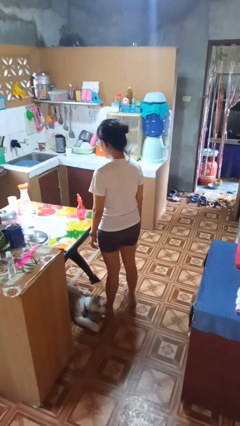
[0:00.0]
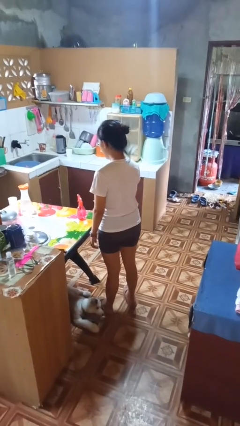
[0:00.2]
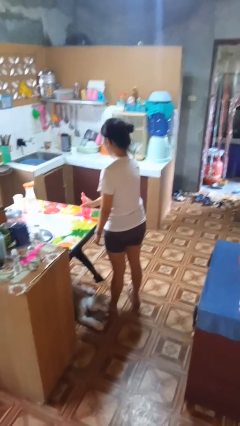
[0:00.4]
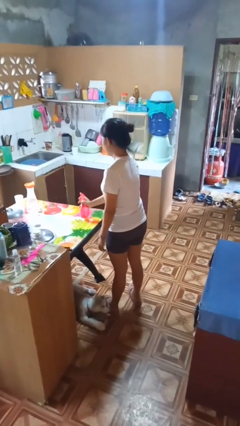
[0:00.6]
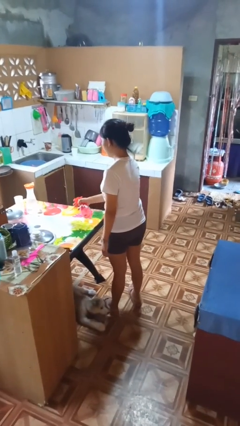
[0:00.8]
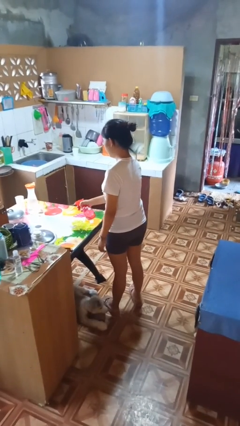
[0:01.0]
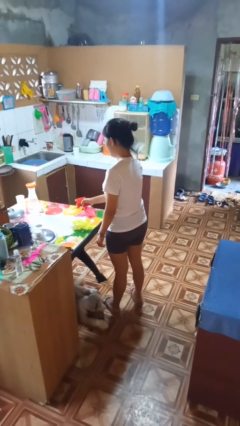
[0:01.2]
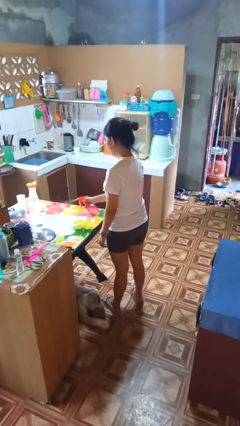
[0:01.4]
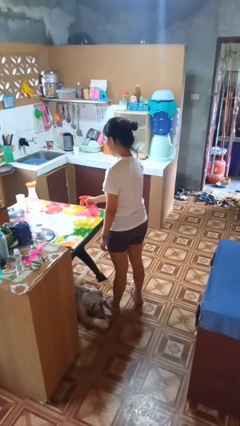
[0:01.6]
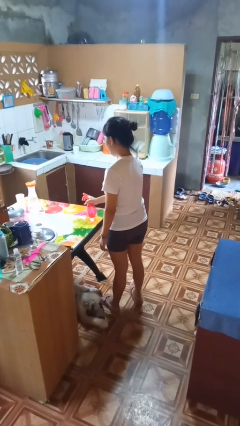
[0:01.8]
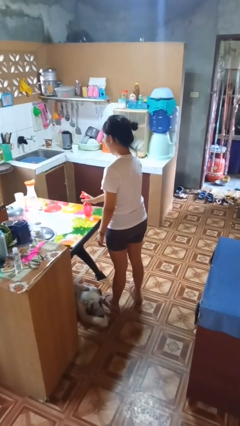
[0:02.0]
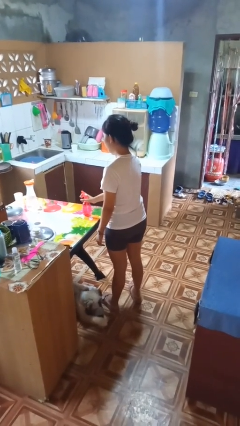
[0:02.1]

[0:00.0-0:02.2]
person sprays from bottle

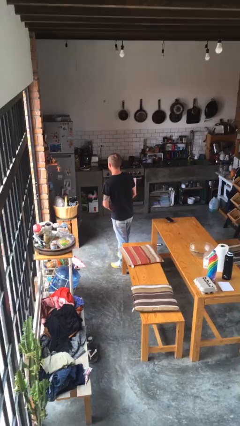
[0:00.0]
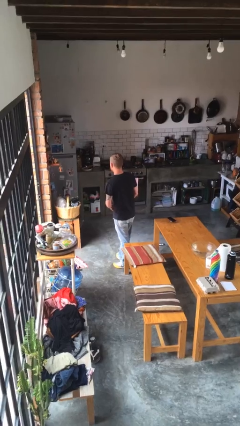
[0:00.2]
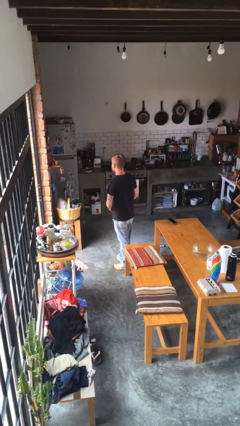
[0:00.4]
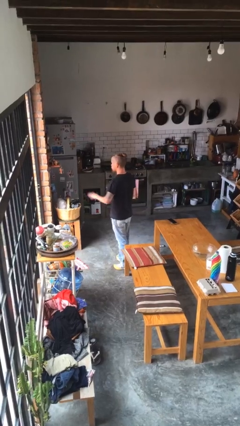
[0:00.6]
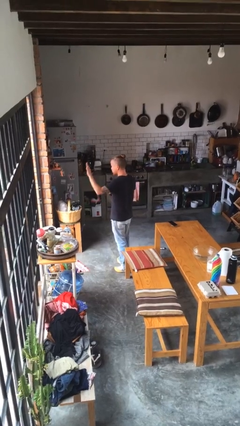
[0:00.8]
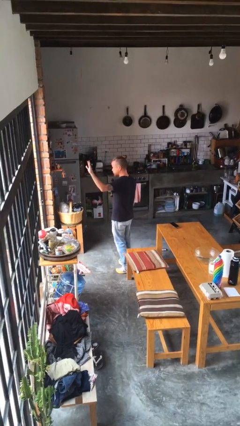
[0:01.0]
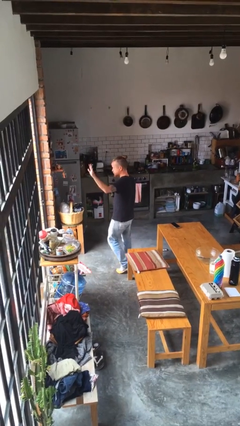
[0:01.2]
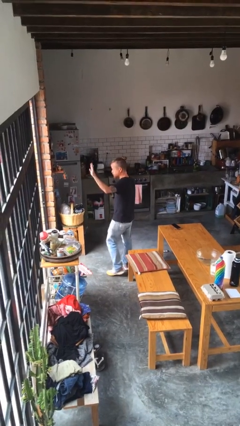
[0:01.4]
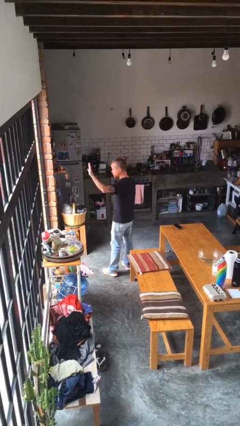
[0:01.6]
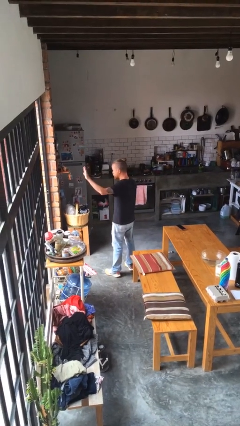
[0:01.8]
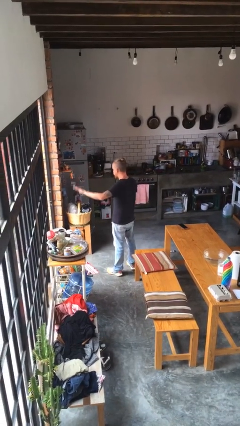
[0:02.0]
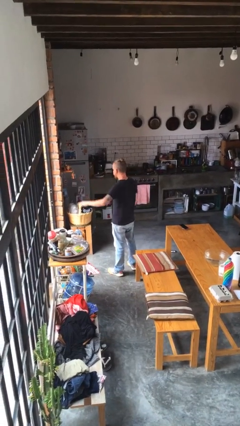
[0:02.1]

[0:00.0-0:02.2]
person gestures number five

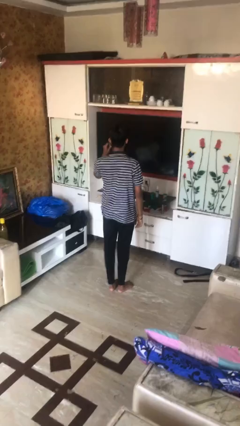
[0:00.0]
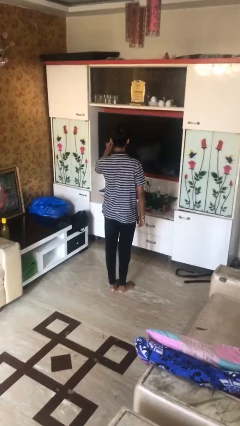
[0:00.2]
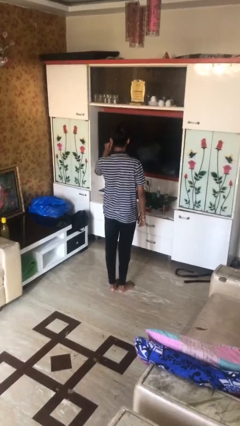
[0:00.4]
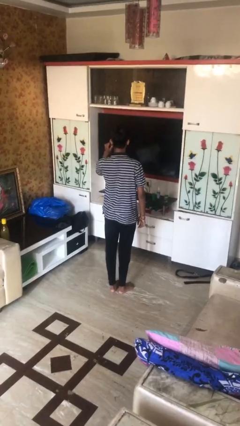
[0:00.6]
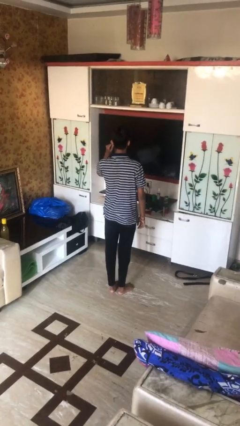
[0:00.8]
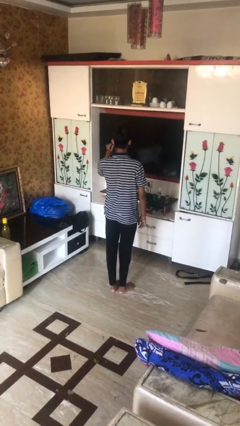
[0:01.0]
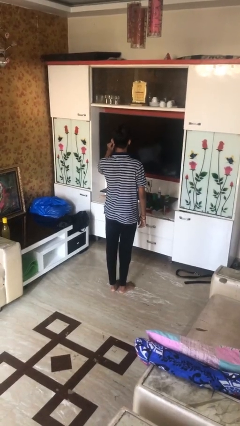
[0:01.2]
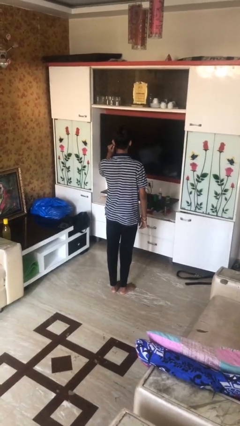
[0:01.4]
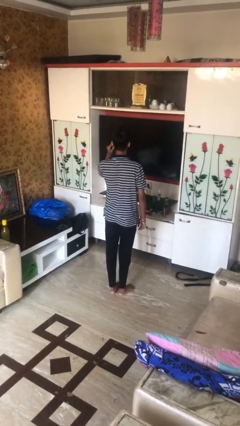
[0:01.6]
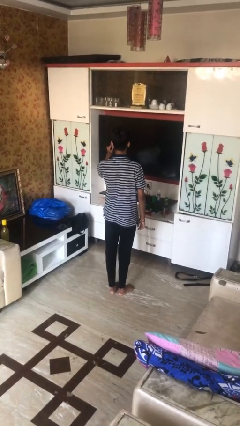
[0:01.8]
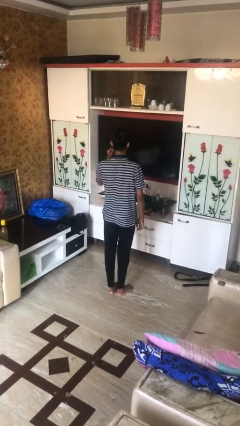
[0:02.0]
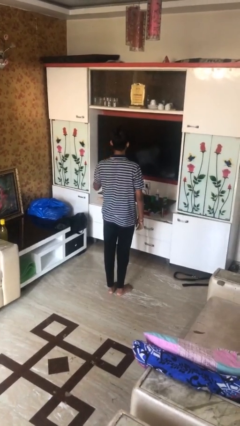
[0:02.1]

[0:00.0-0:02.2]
person touches earlobe

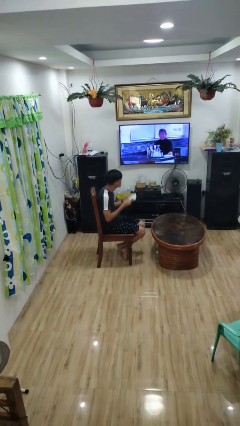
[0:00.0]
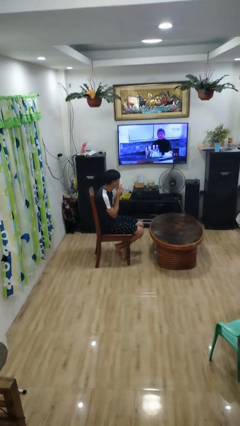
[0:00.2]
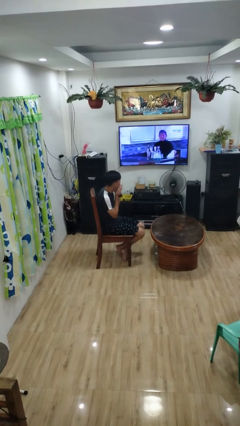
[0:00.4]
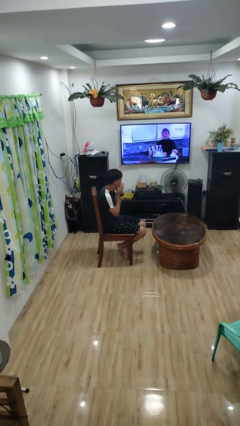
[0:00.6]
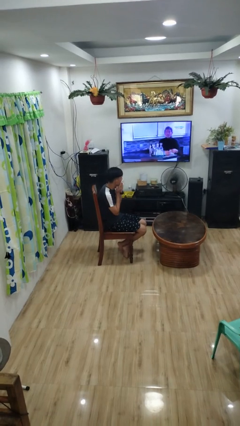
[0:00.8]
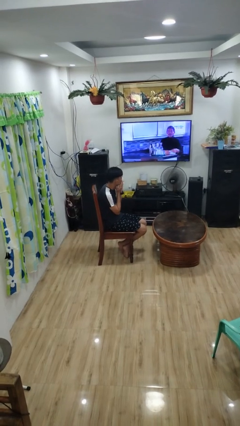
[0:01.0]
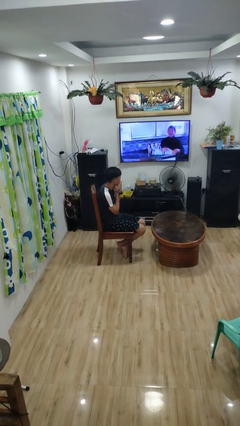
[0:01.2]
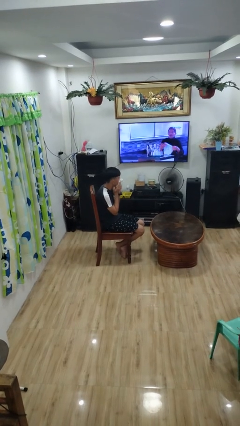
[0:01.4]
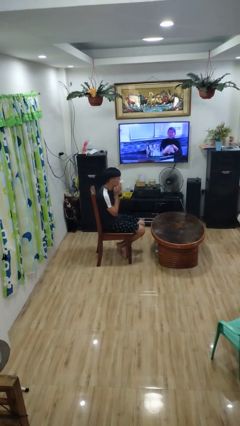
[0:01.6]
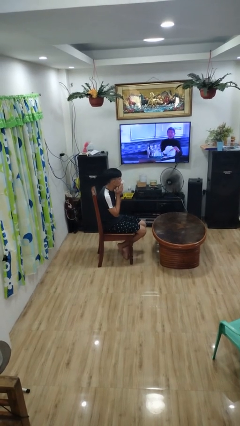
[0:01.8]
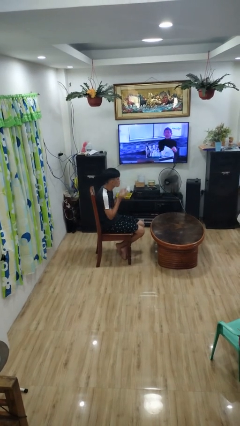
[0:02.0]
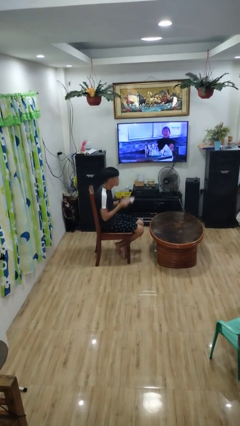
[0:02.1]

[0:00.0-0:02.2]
person wipes mouth with napkin

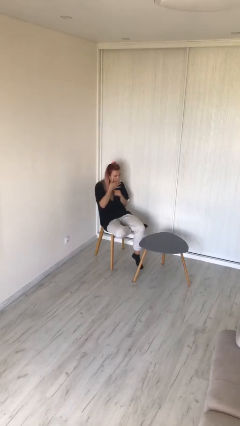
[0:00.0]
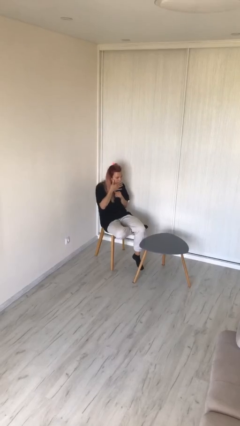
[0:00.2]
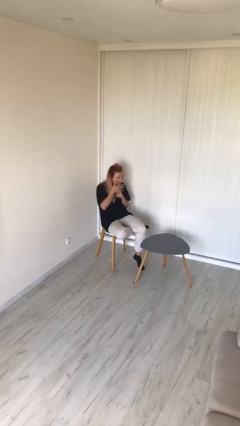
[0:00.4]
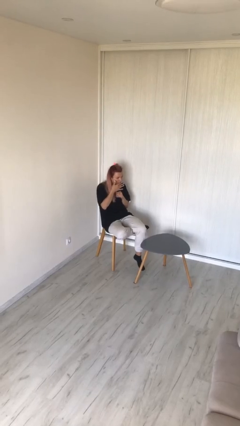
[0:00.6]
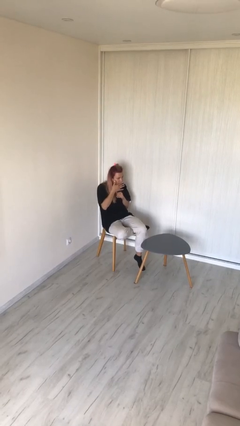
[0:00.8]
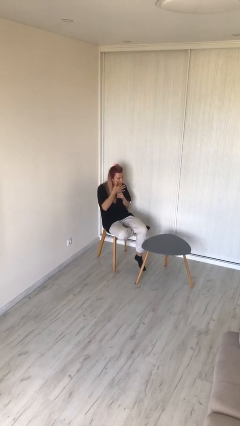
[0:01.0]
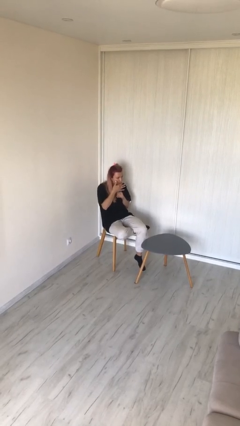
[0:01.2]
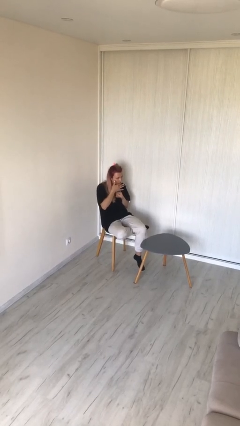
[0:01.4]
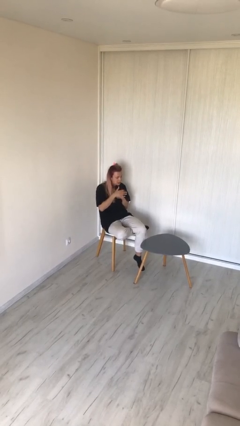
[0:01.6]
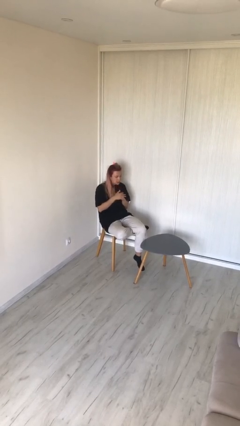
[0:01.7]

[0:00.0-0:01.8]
person licks fingers

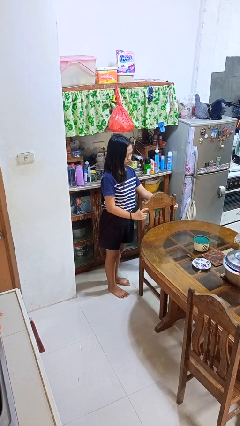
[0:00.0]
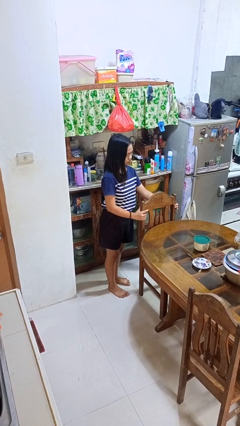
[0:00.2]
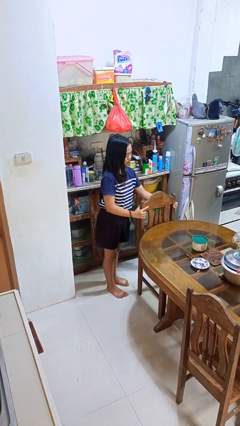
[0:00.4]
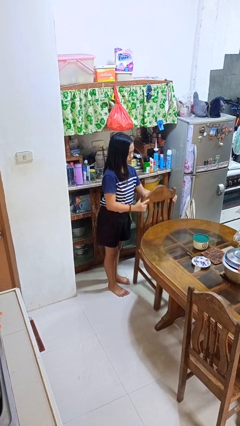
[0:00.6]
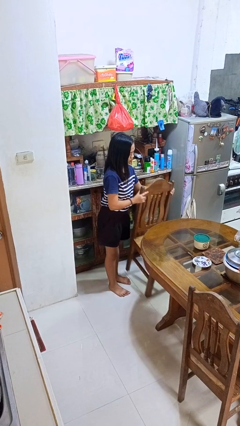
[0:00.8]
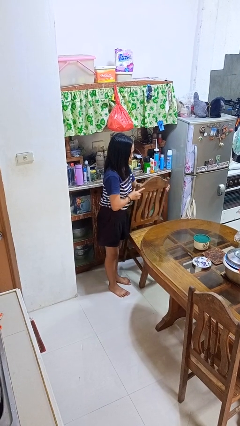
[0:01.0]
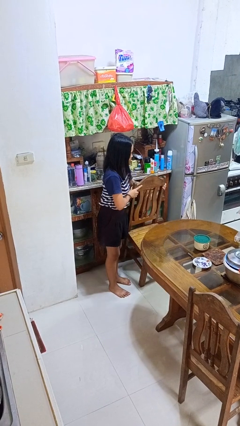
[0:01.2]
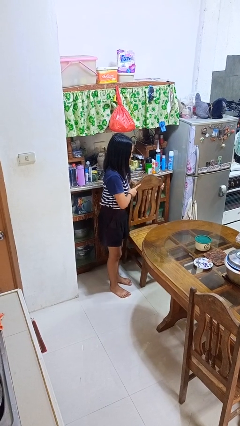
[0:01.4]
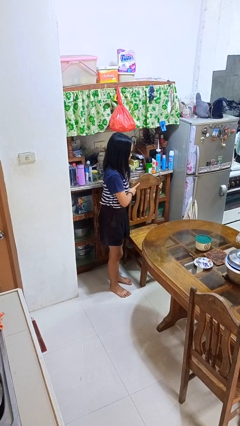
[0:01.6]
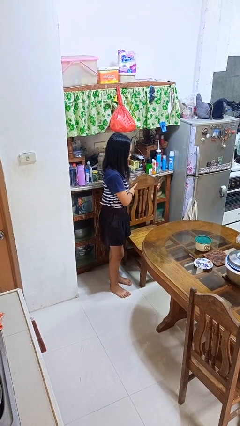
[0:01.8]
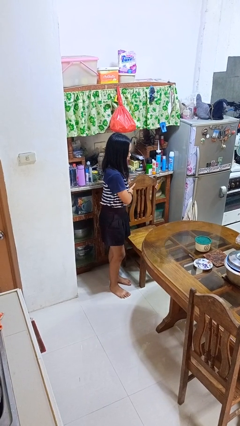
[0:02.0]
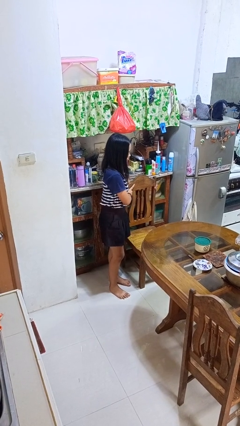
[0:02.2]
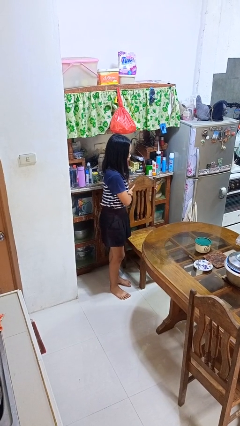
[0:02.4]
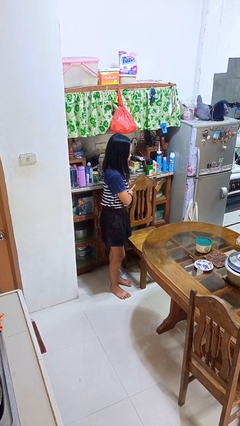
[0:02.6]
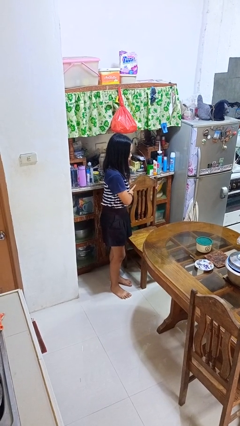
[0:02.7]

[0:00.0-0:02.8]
person pulls out chair

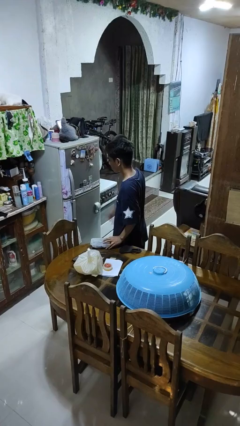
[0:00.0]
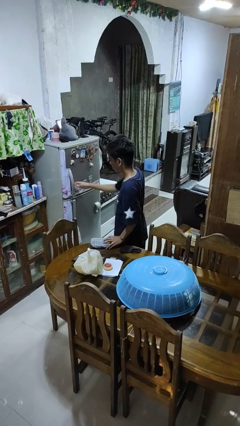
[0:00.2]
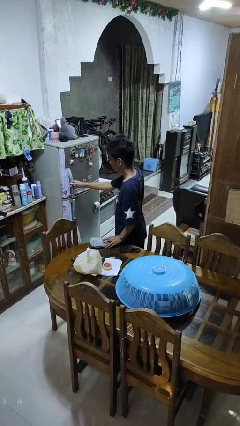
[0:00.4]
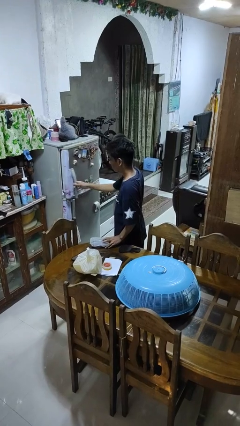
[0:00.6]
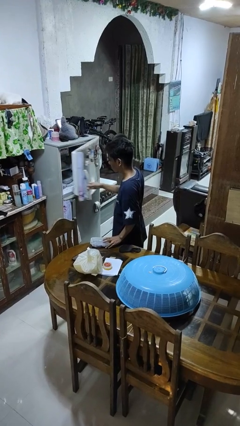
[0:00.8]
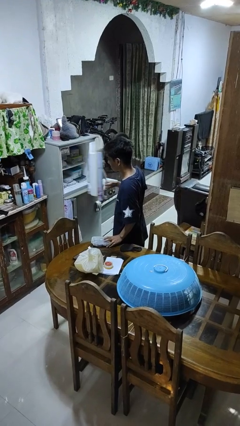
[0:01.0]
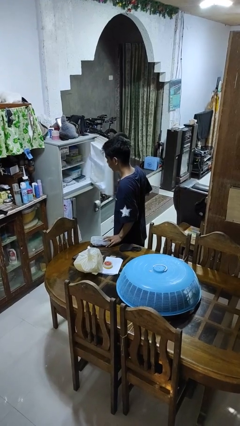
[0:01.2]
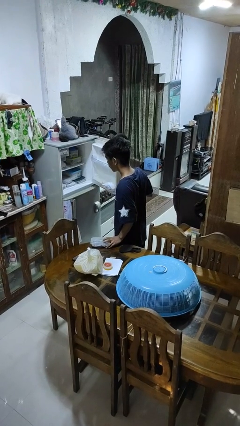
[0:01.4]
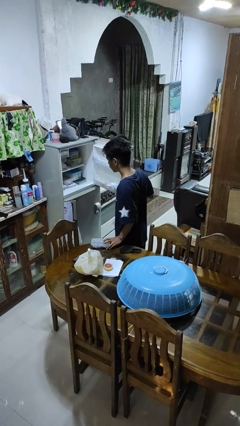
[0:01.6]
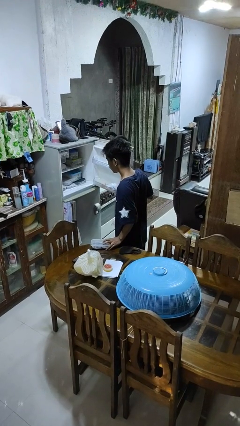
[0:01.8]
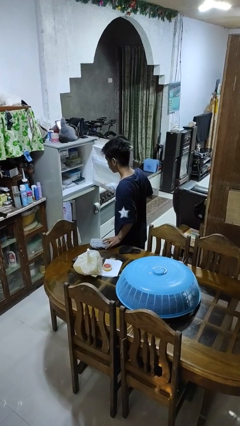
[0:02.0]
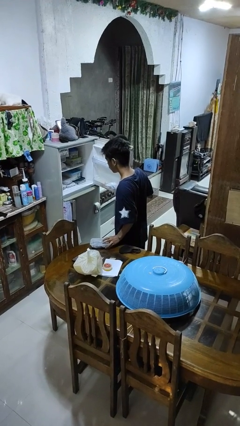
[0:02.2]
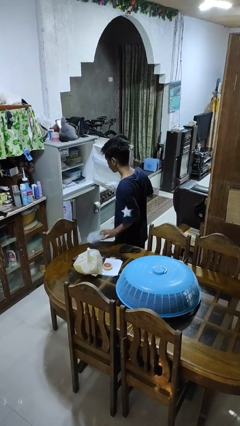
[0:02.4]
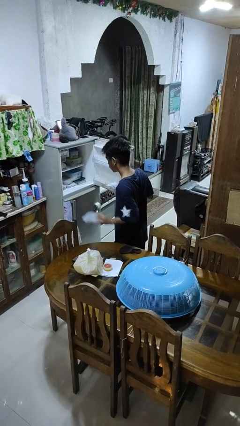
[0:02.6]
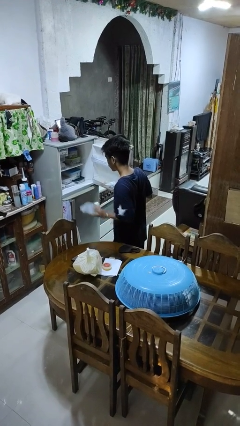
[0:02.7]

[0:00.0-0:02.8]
person opens refrigerator

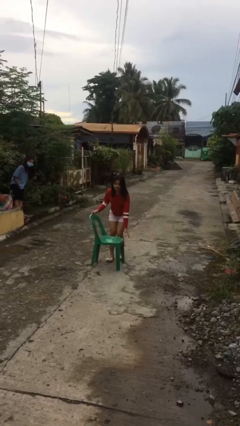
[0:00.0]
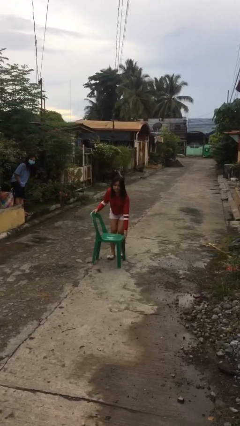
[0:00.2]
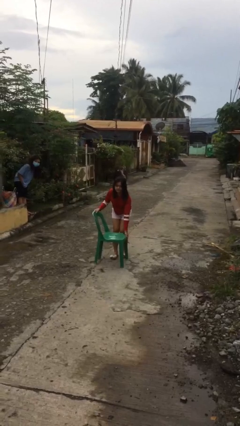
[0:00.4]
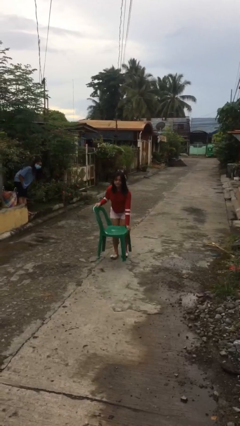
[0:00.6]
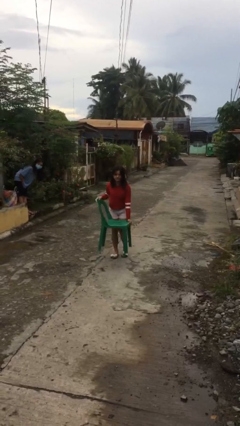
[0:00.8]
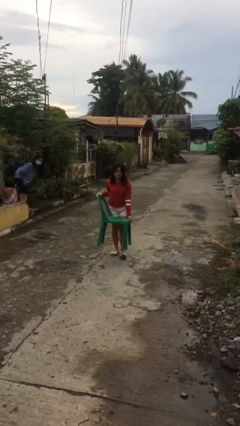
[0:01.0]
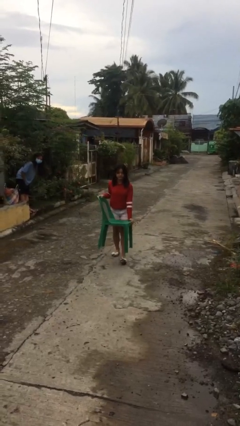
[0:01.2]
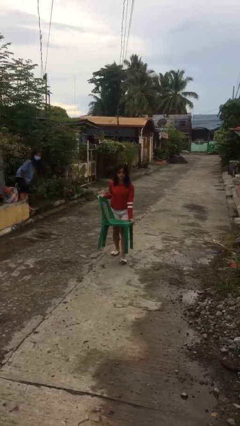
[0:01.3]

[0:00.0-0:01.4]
person picks up object from floor
